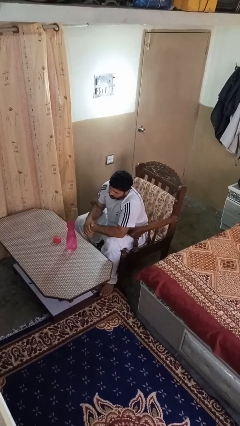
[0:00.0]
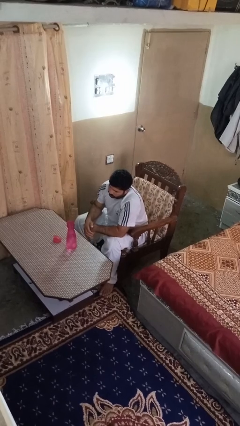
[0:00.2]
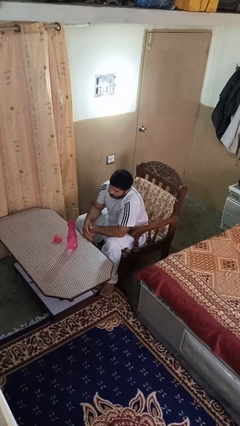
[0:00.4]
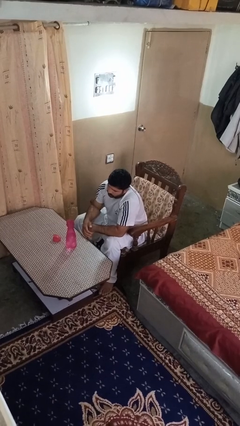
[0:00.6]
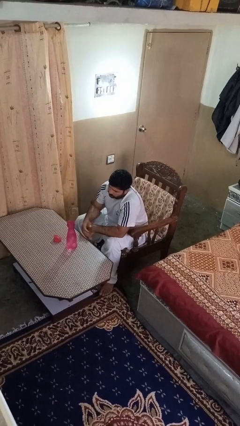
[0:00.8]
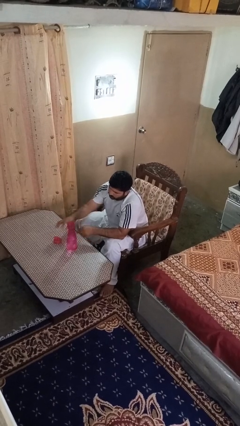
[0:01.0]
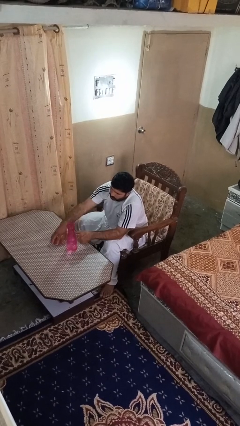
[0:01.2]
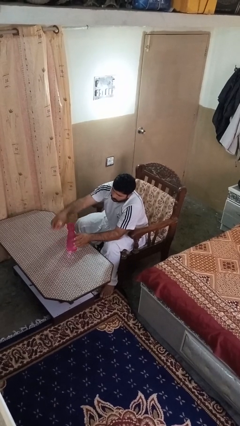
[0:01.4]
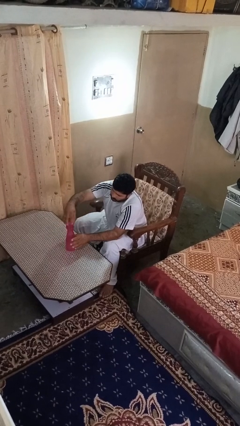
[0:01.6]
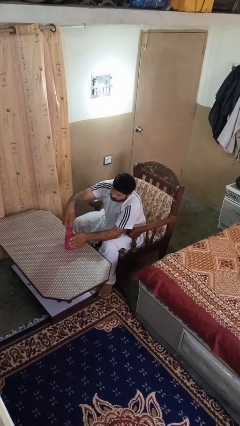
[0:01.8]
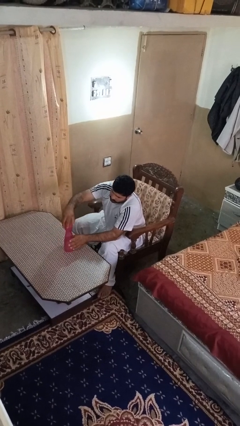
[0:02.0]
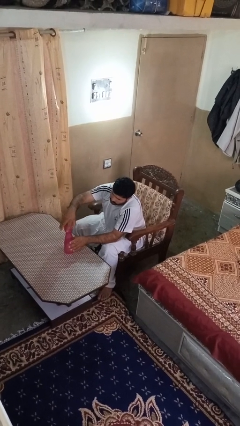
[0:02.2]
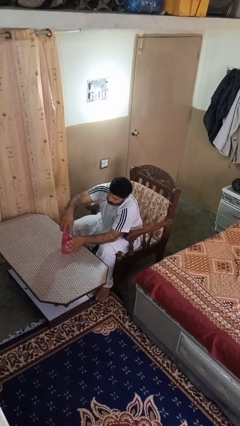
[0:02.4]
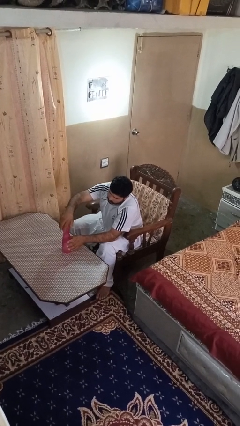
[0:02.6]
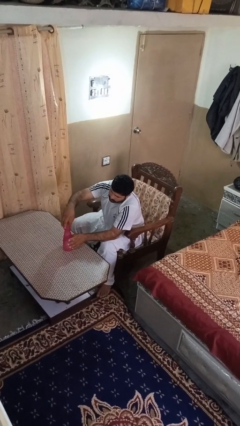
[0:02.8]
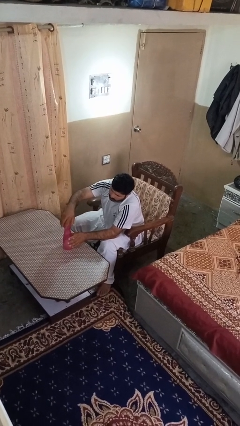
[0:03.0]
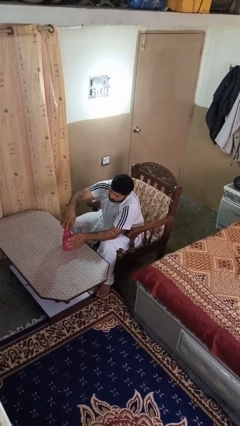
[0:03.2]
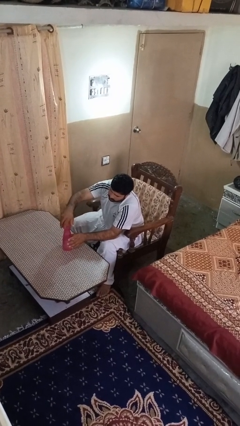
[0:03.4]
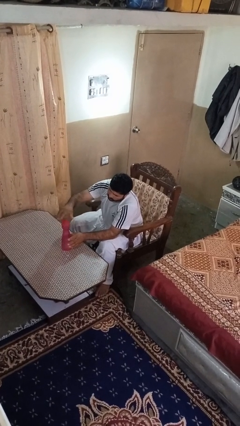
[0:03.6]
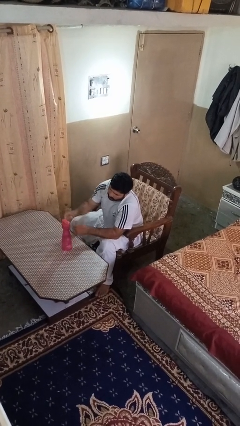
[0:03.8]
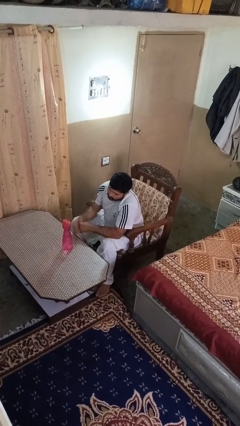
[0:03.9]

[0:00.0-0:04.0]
person screws lid to bottle

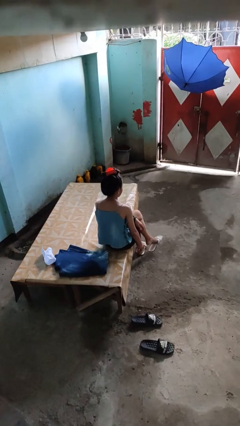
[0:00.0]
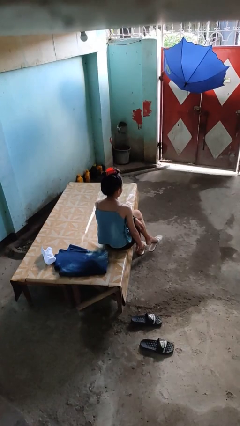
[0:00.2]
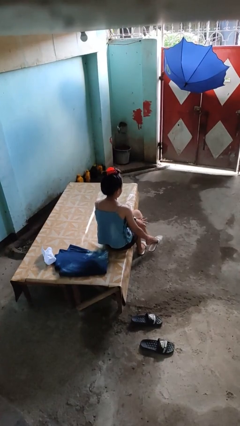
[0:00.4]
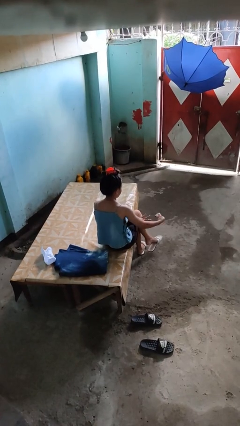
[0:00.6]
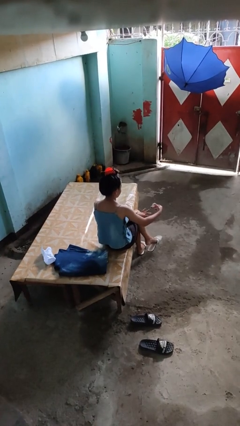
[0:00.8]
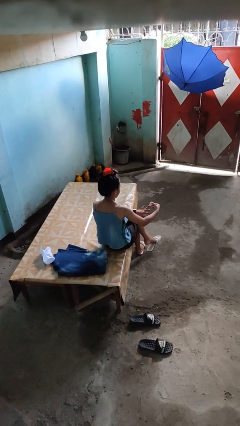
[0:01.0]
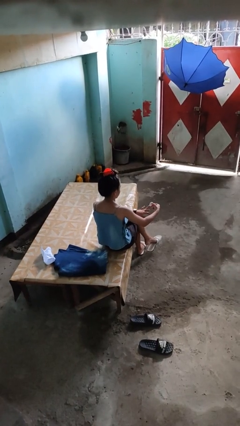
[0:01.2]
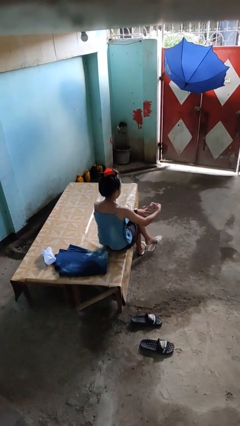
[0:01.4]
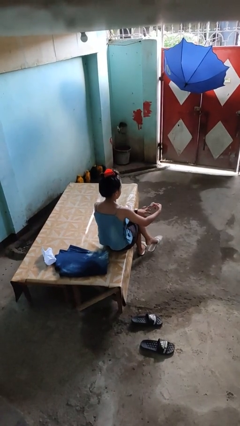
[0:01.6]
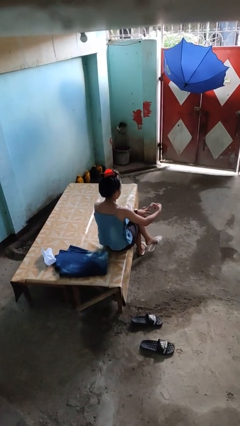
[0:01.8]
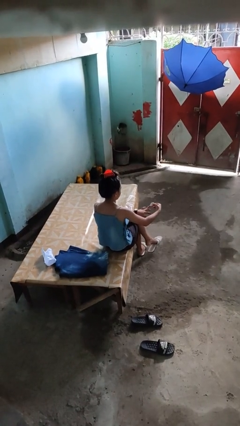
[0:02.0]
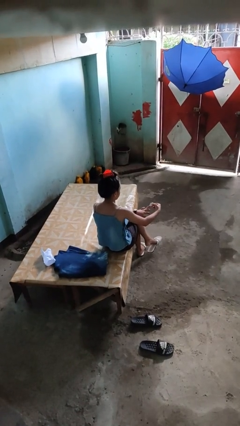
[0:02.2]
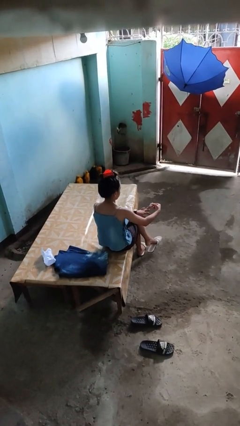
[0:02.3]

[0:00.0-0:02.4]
person clips fingernails

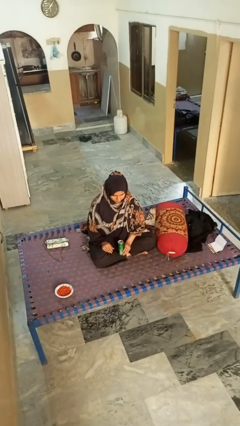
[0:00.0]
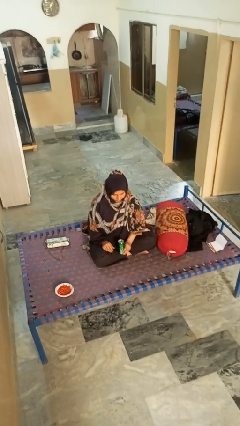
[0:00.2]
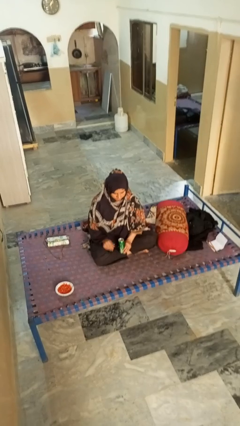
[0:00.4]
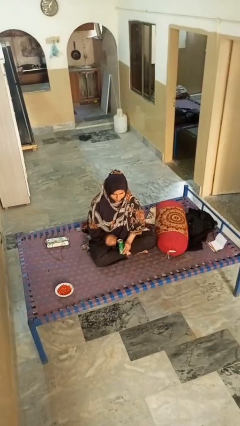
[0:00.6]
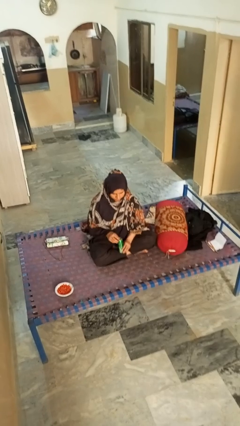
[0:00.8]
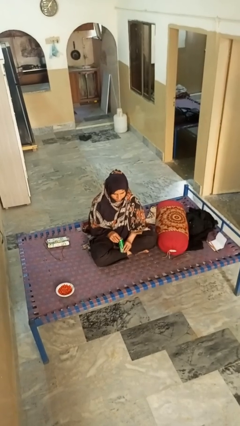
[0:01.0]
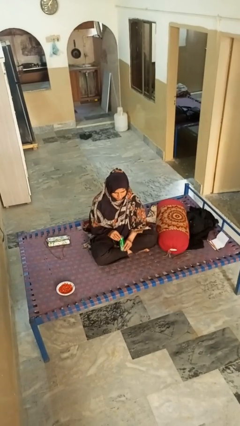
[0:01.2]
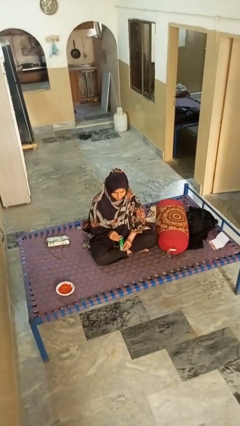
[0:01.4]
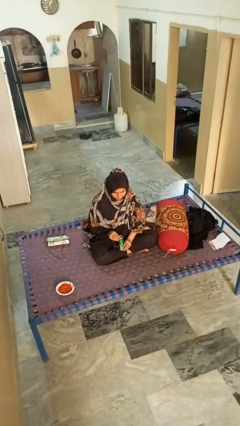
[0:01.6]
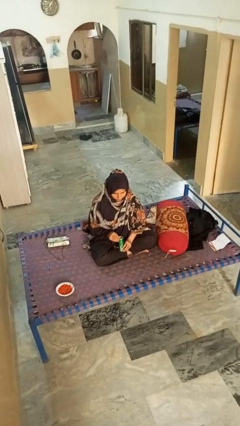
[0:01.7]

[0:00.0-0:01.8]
person opens can with can opener

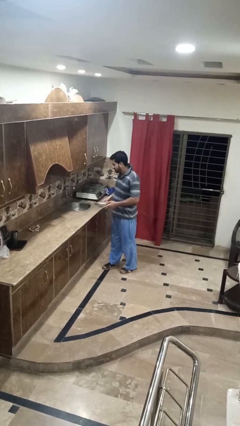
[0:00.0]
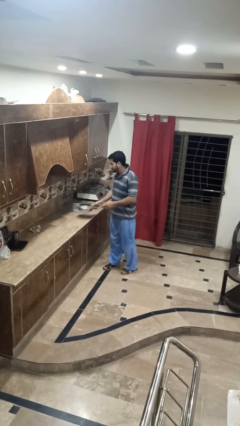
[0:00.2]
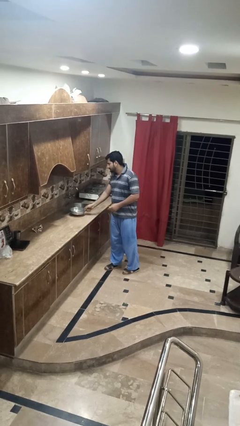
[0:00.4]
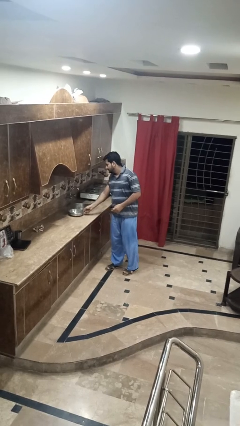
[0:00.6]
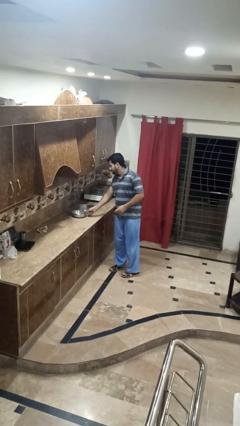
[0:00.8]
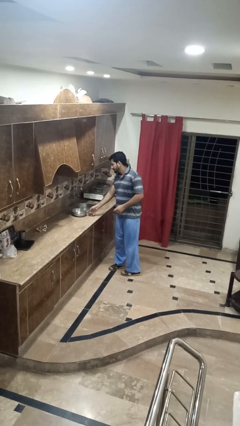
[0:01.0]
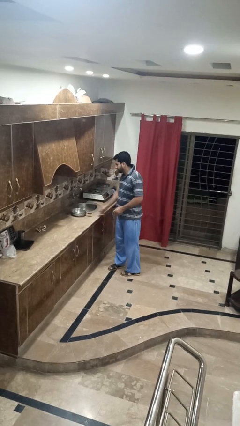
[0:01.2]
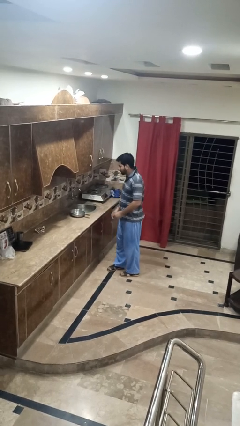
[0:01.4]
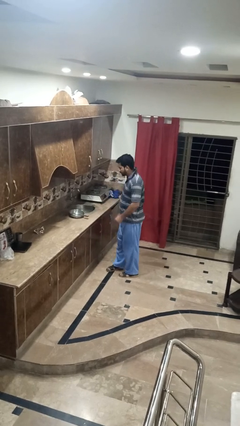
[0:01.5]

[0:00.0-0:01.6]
person puts down object on countertop

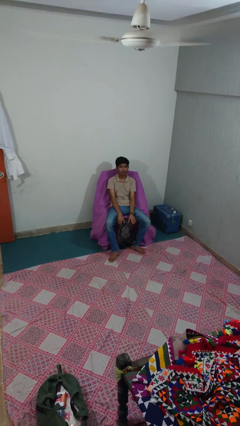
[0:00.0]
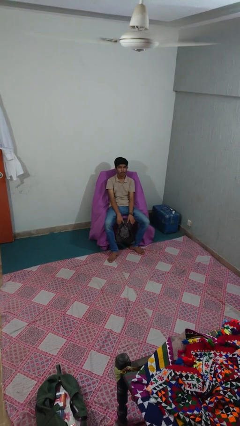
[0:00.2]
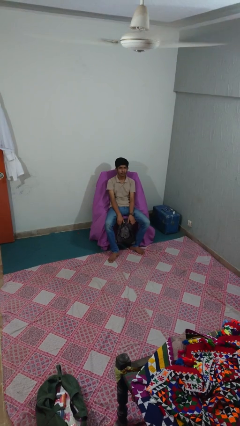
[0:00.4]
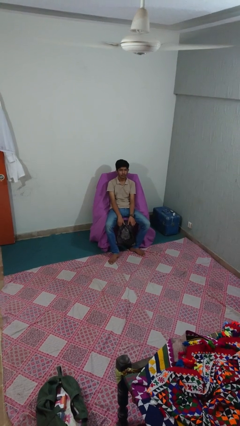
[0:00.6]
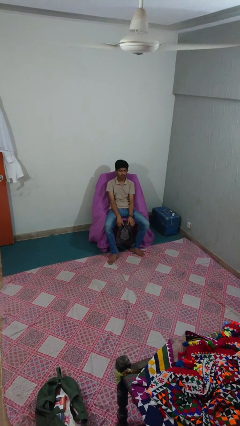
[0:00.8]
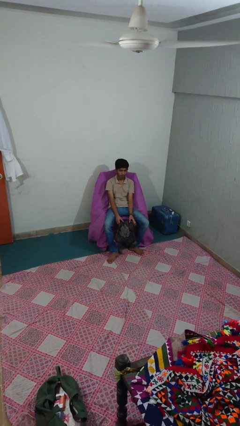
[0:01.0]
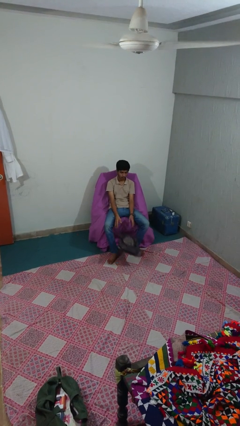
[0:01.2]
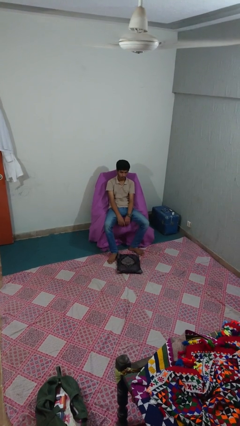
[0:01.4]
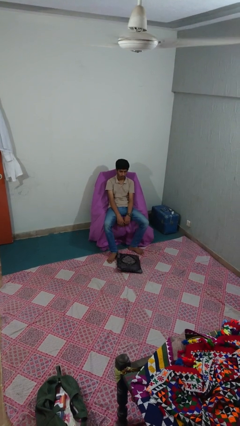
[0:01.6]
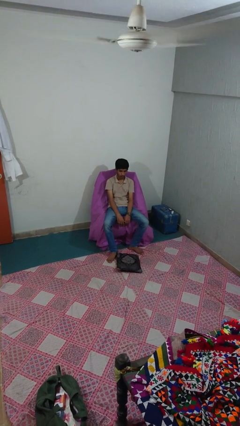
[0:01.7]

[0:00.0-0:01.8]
person drops object

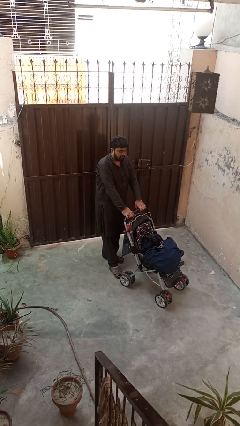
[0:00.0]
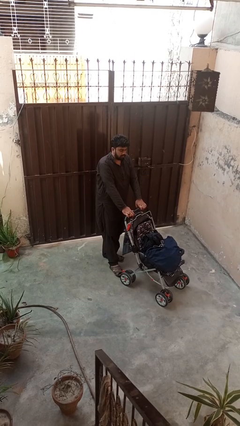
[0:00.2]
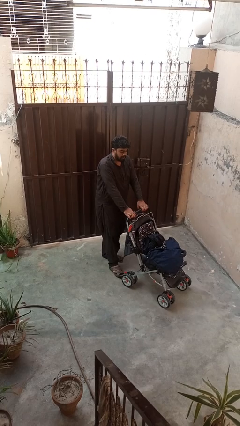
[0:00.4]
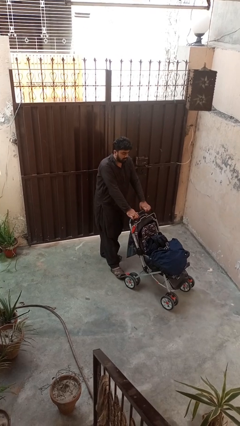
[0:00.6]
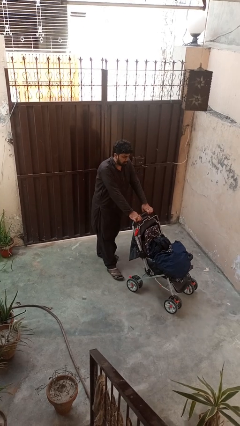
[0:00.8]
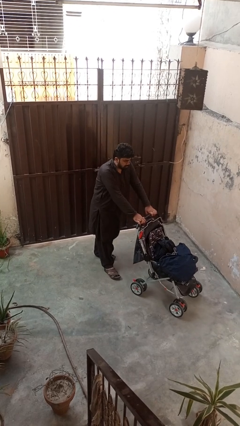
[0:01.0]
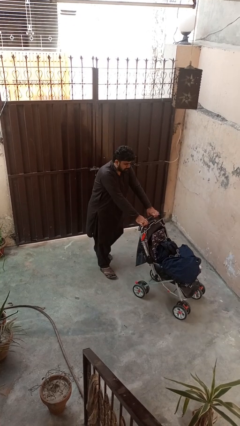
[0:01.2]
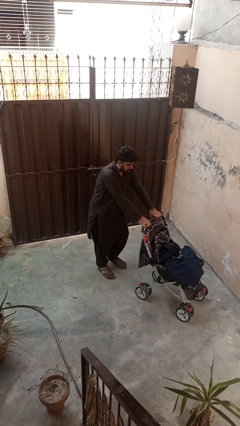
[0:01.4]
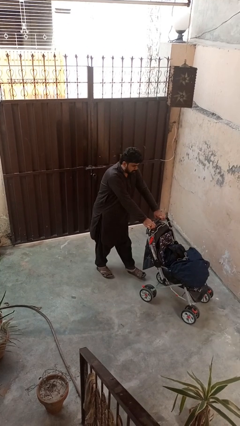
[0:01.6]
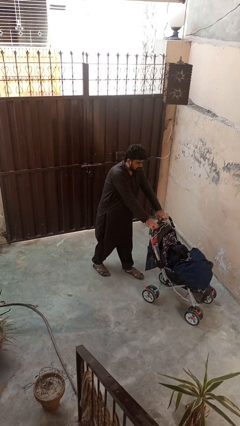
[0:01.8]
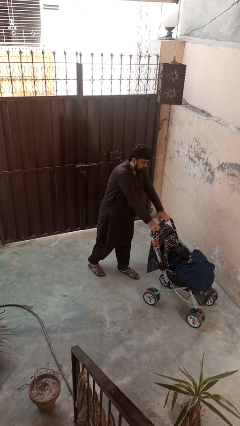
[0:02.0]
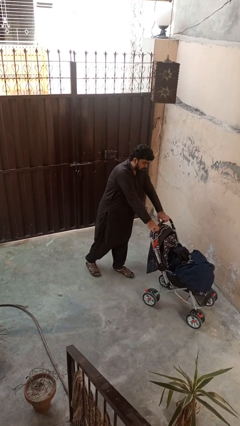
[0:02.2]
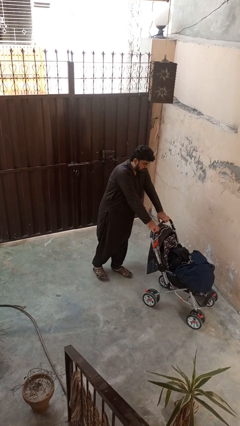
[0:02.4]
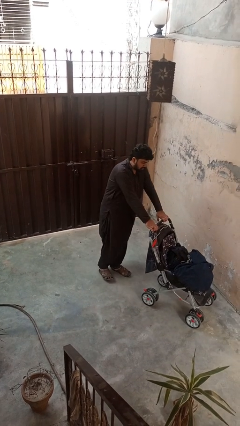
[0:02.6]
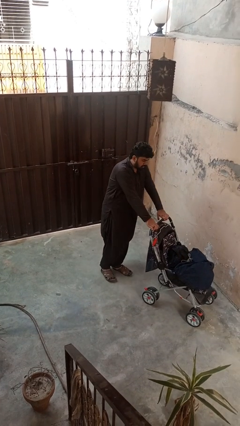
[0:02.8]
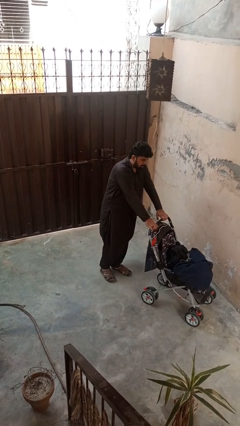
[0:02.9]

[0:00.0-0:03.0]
person pushes wheeled cart

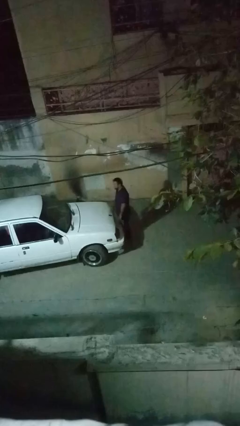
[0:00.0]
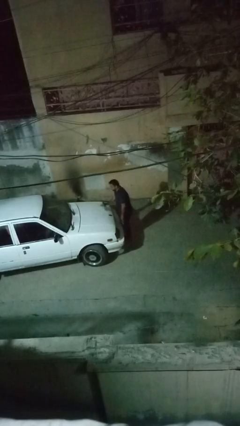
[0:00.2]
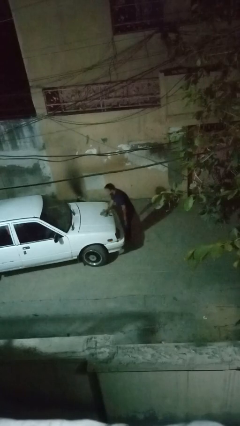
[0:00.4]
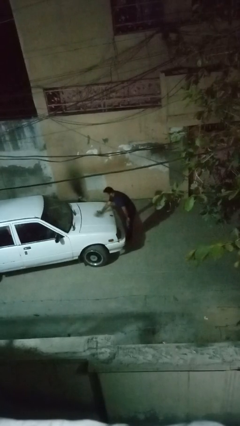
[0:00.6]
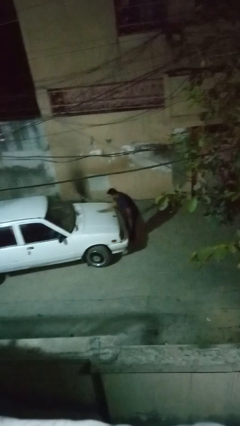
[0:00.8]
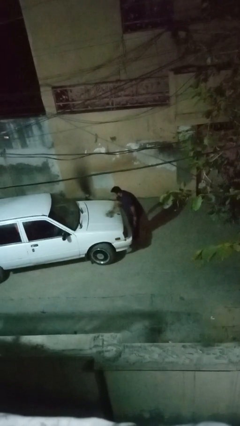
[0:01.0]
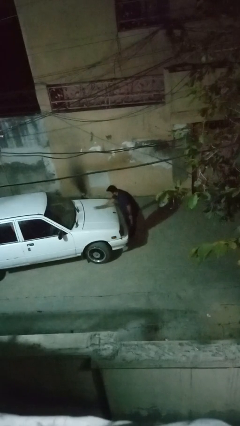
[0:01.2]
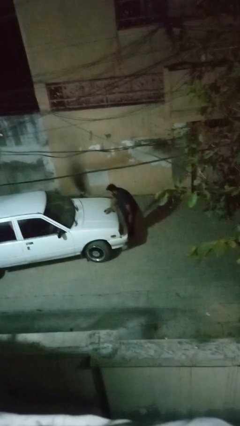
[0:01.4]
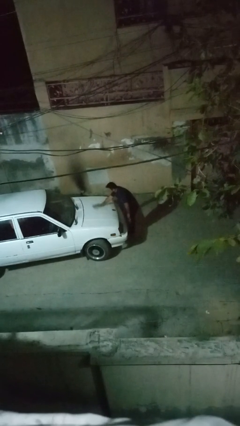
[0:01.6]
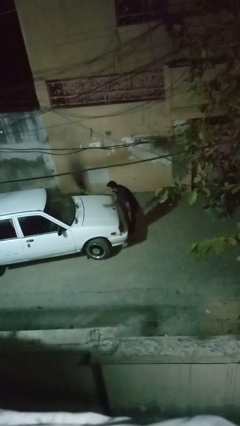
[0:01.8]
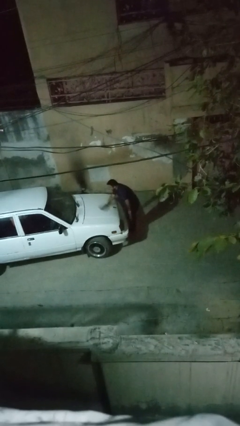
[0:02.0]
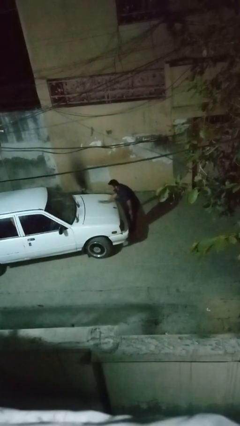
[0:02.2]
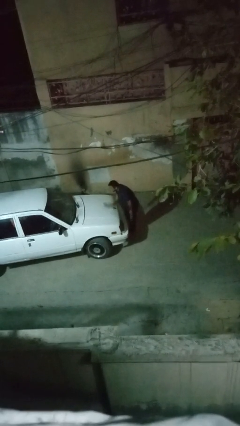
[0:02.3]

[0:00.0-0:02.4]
person polishes car with rag

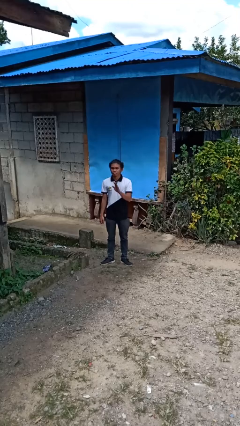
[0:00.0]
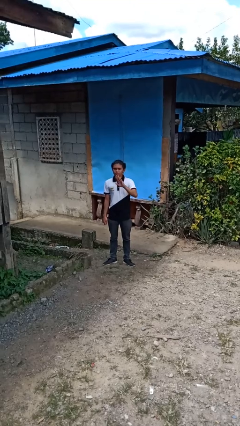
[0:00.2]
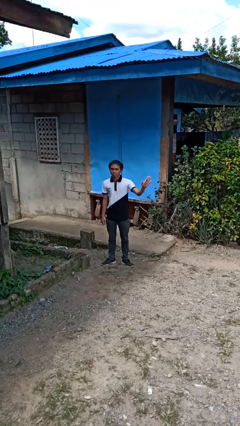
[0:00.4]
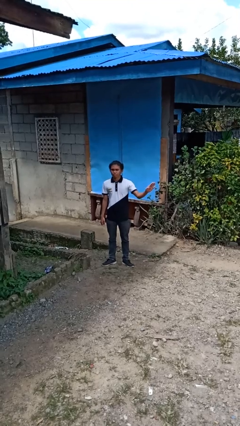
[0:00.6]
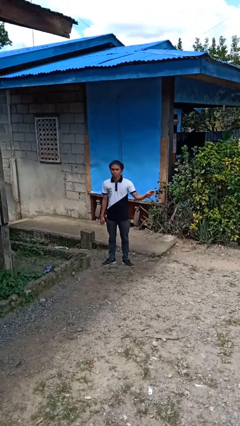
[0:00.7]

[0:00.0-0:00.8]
person gestures swipe left
